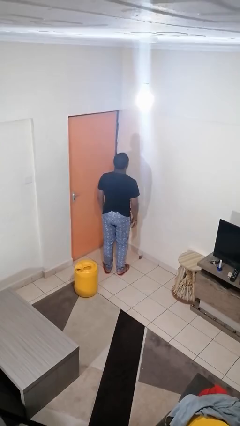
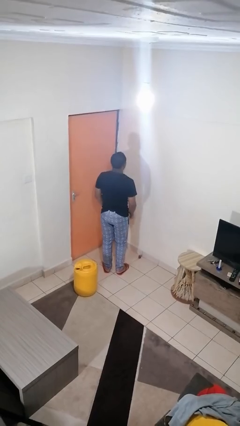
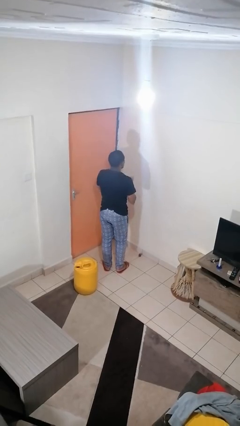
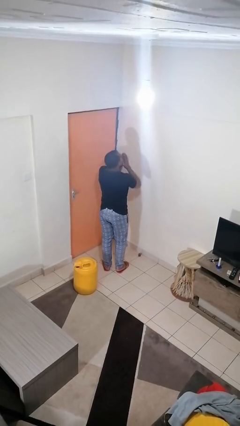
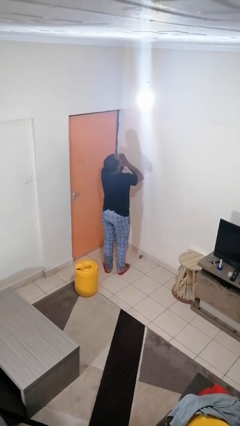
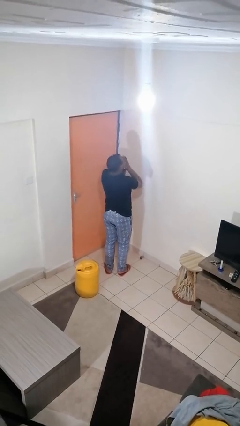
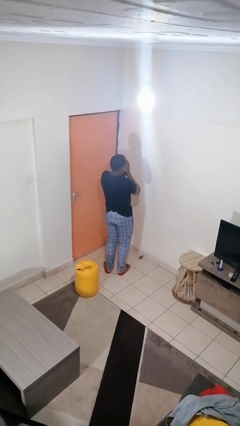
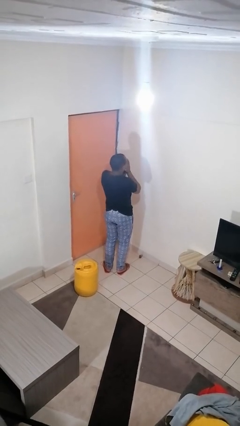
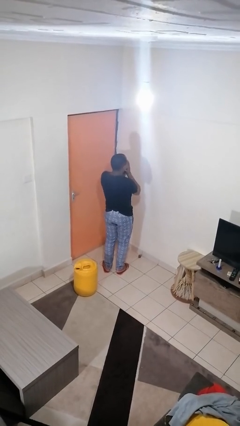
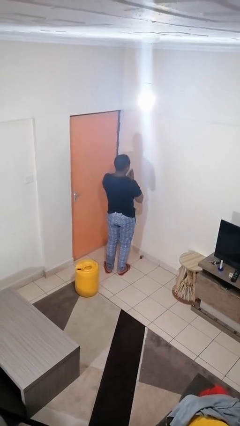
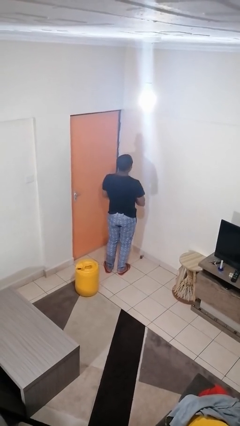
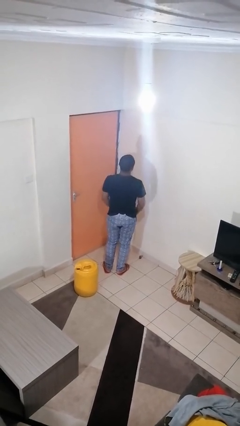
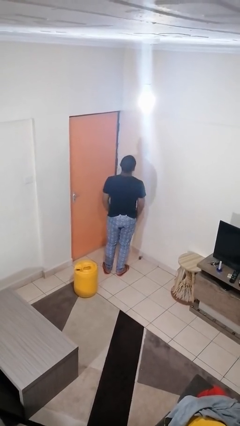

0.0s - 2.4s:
person sneezes into hand

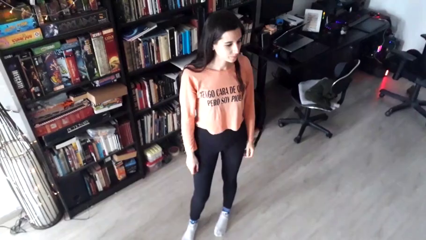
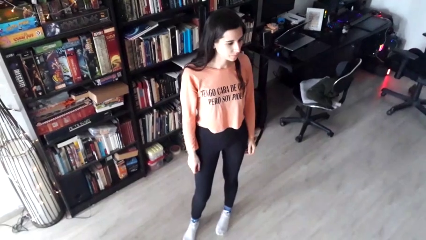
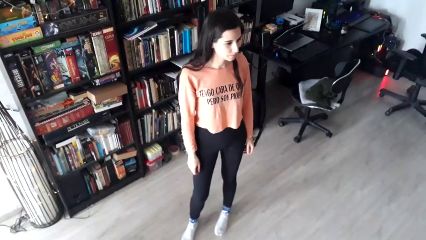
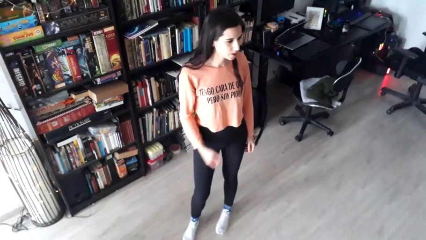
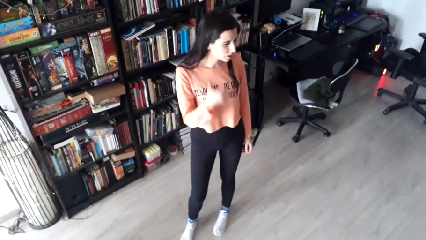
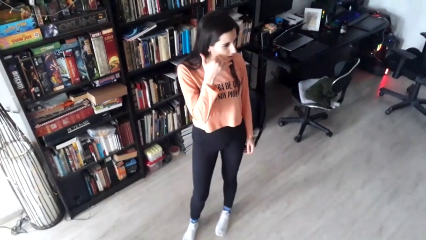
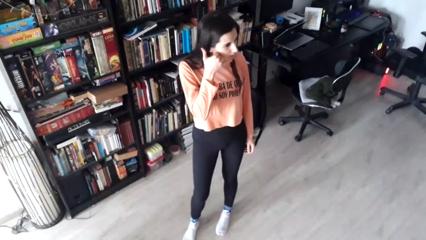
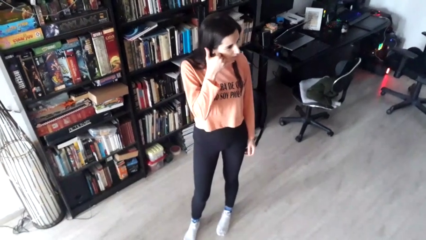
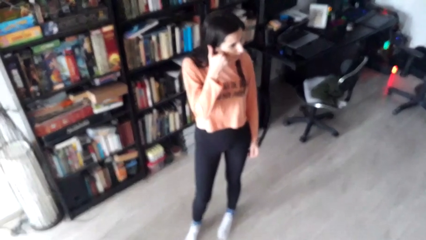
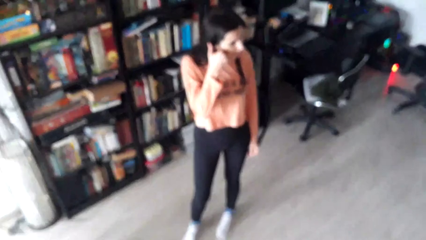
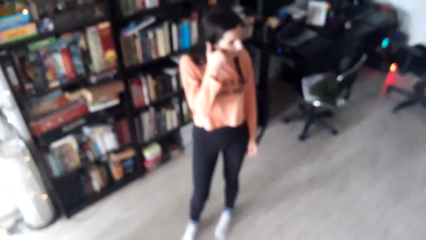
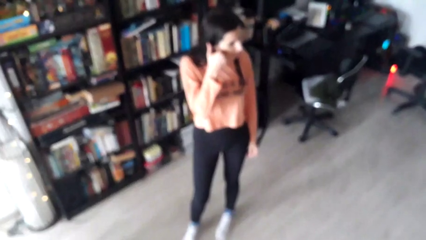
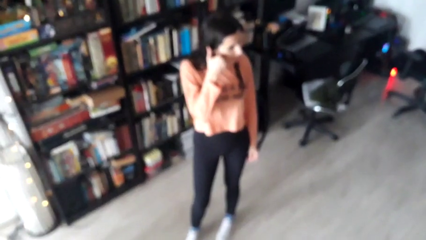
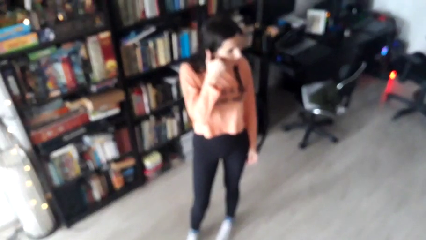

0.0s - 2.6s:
person gestures call me

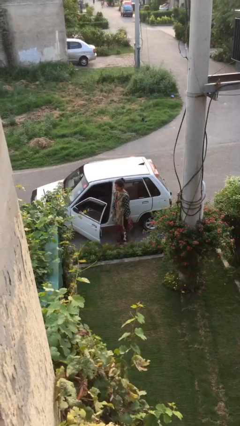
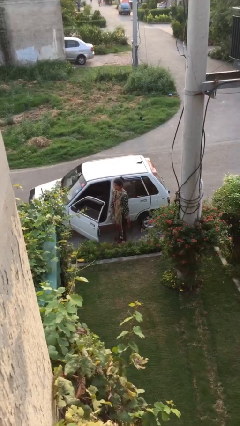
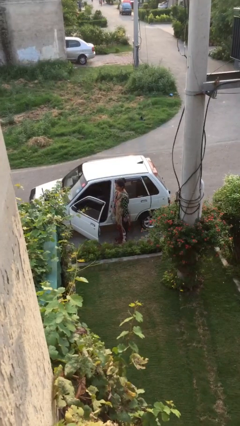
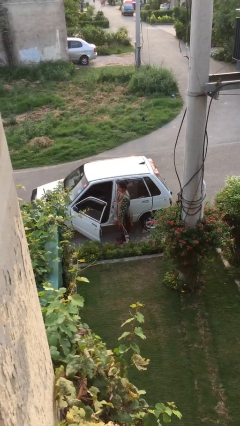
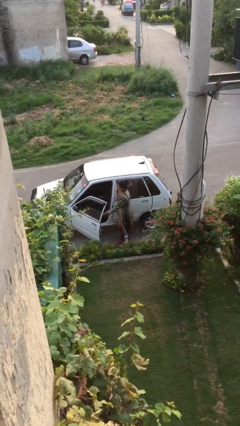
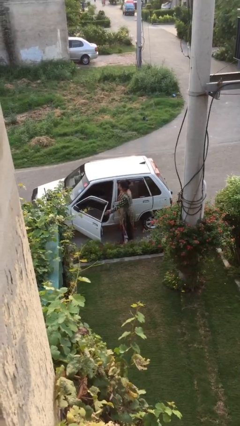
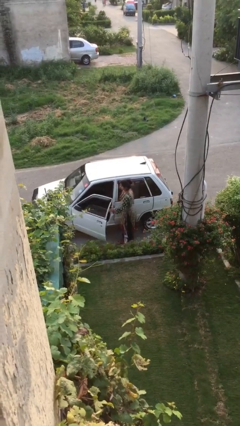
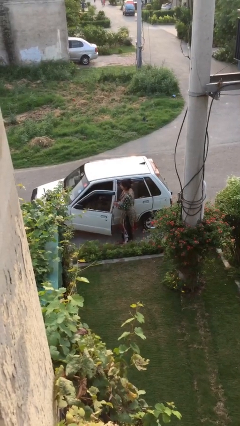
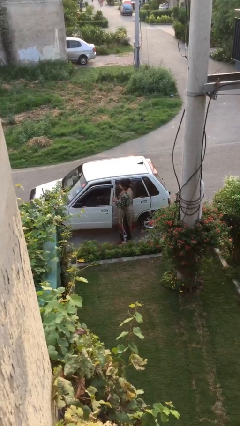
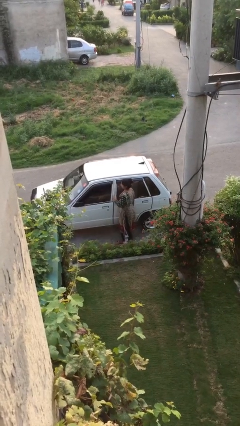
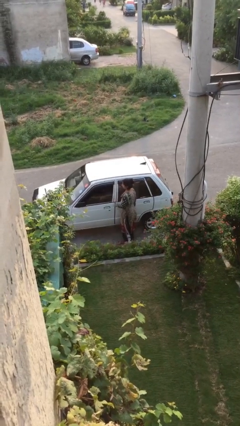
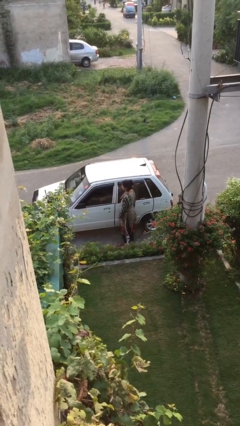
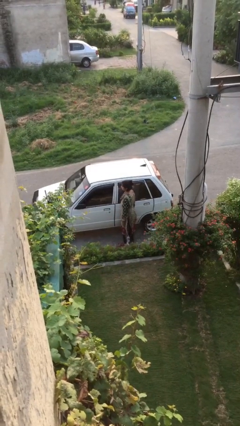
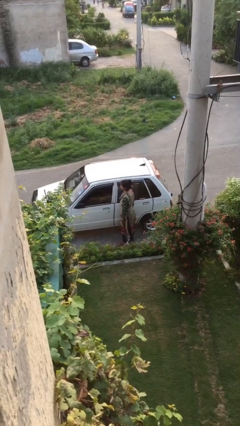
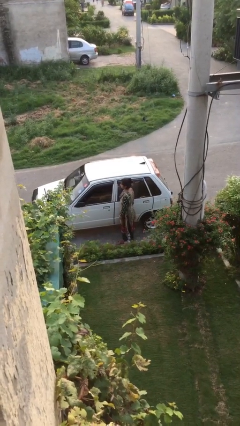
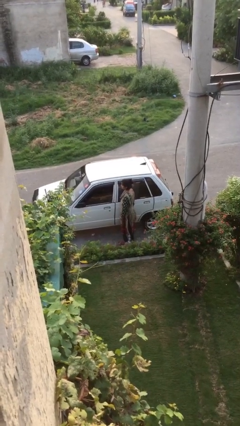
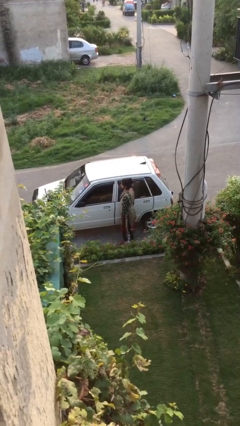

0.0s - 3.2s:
person closes car door

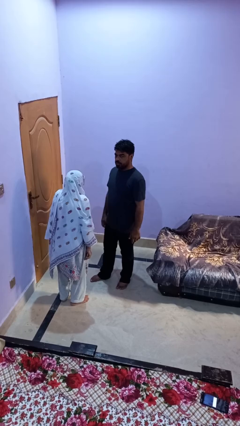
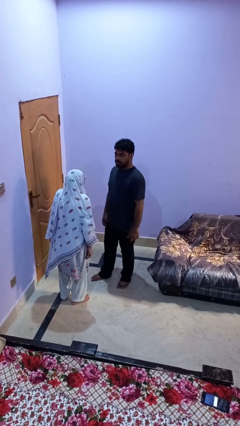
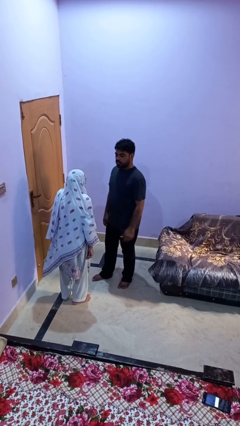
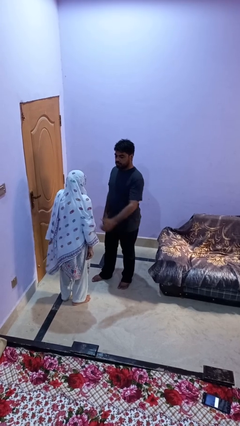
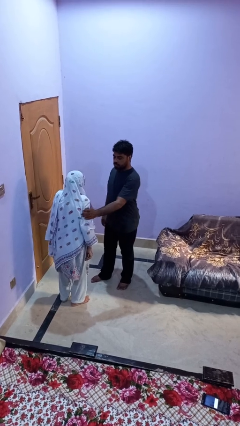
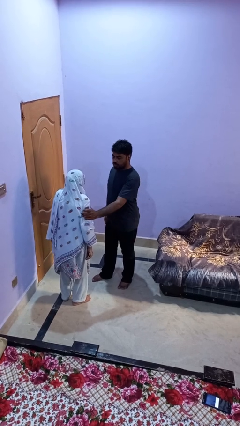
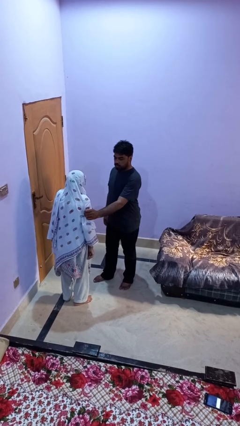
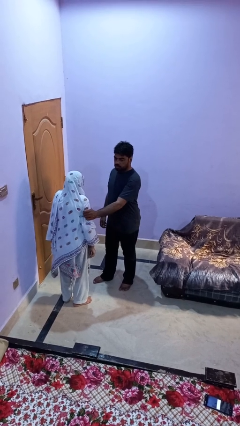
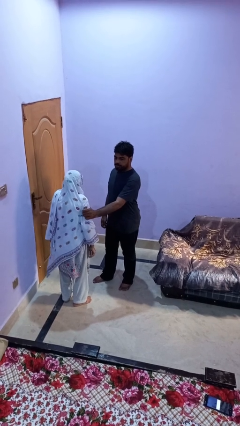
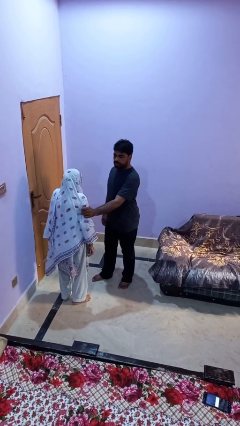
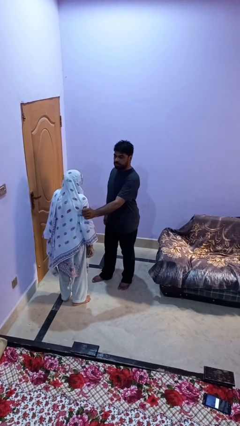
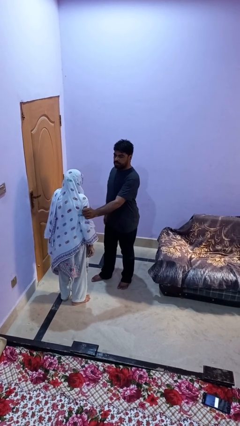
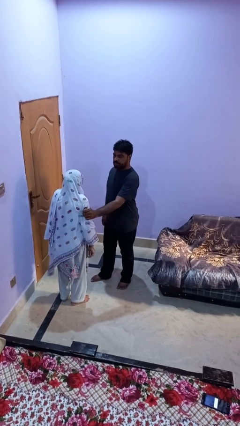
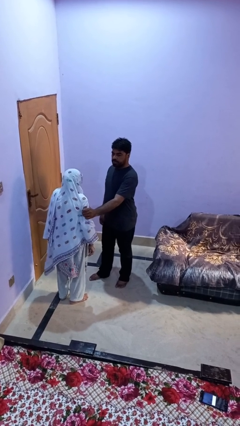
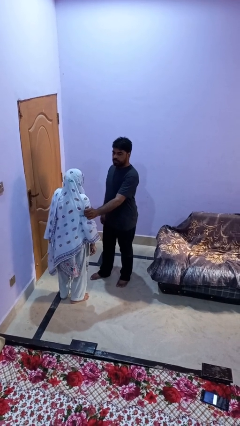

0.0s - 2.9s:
person grabs person by bicep

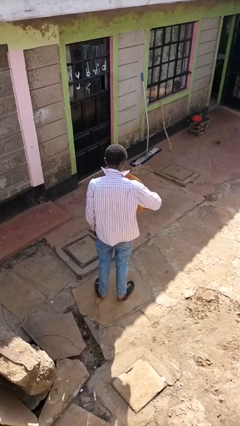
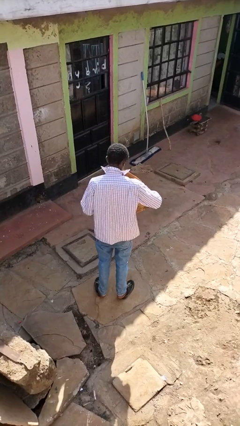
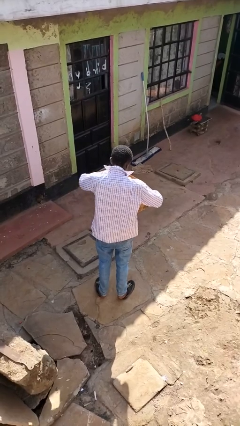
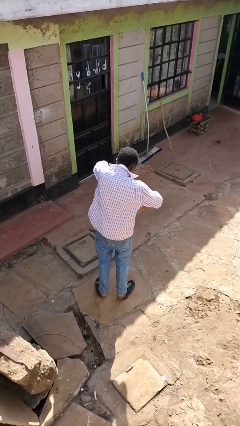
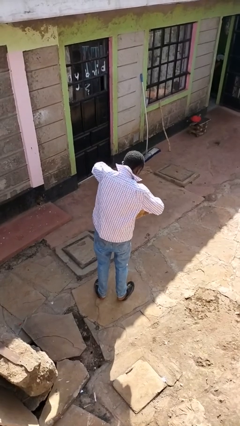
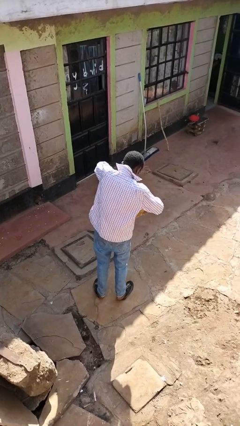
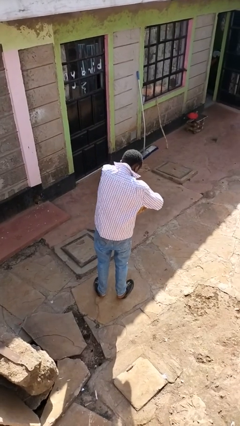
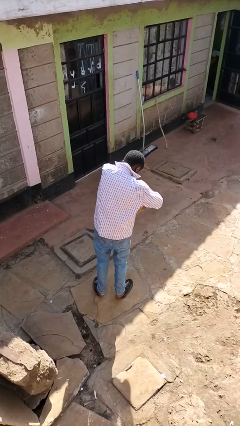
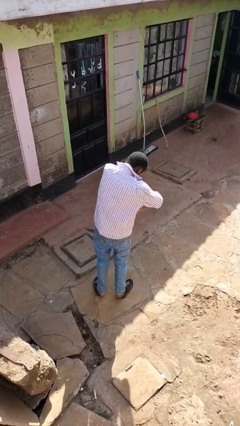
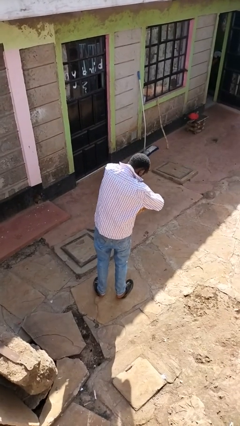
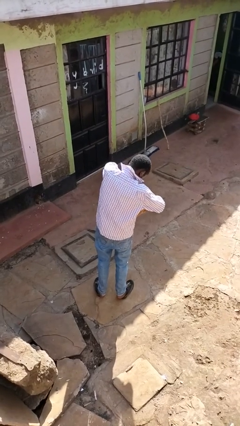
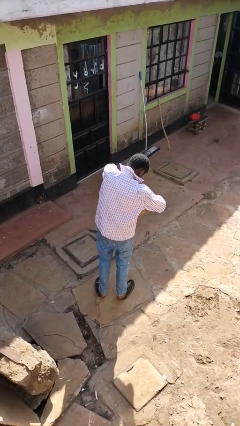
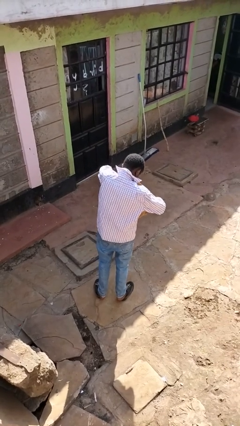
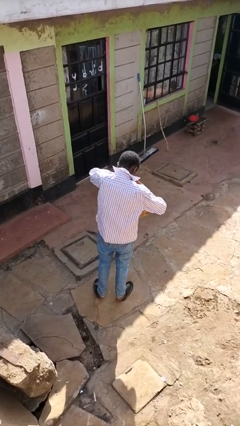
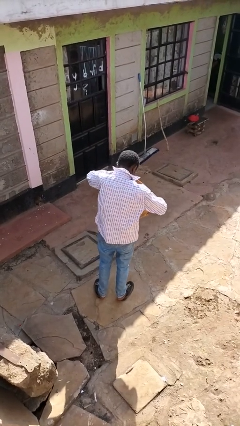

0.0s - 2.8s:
person searches in box

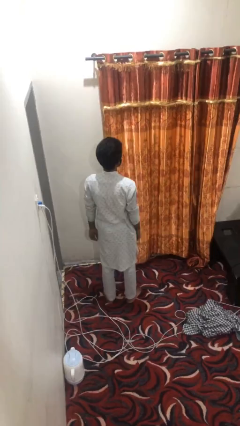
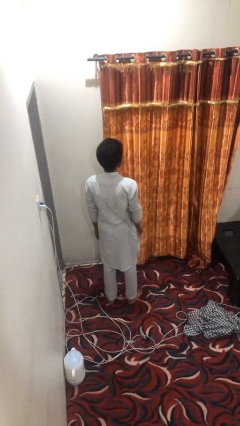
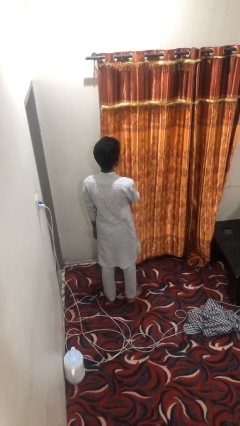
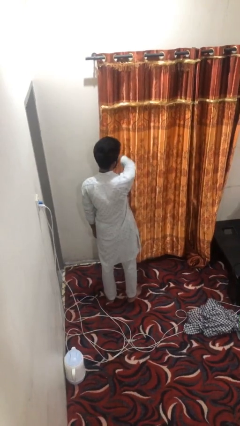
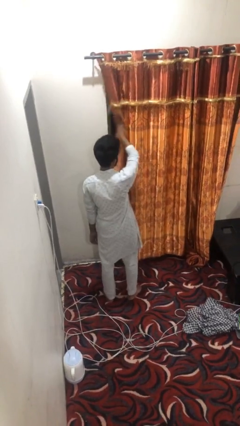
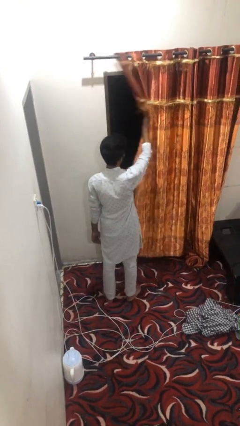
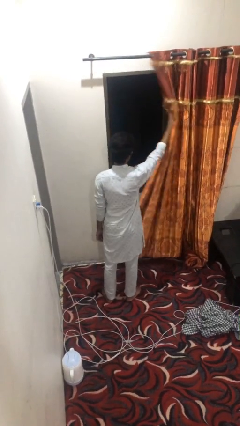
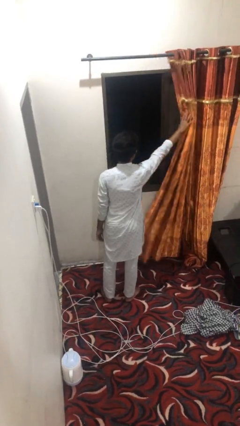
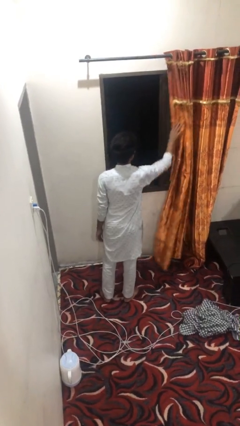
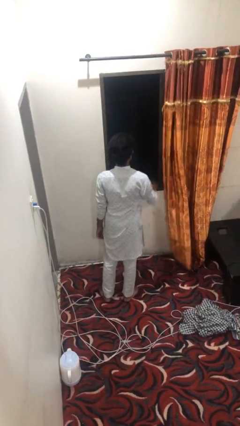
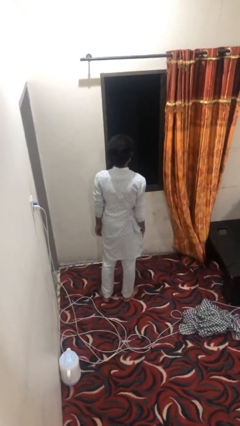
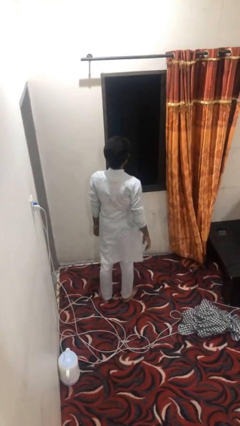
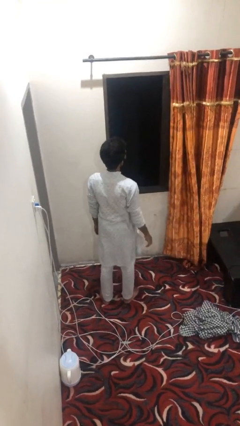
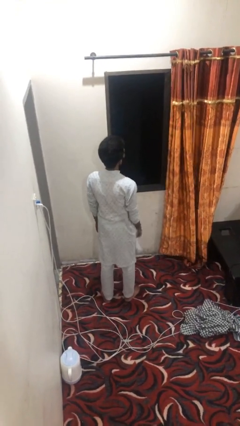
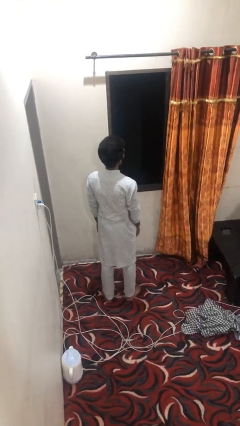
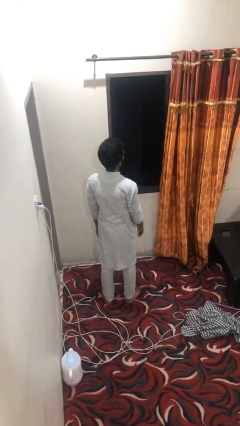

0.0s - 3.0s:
person opens curtains

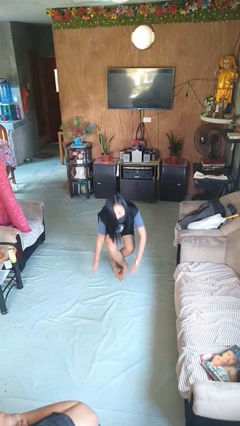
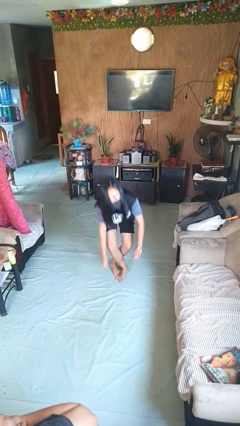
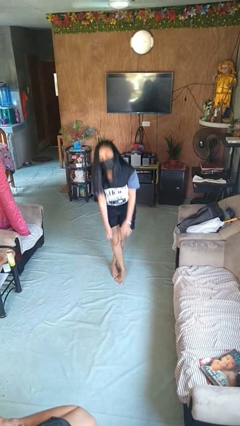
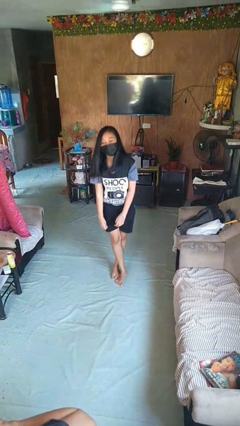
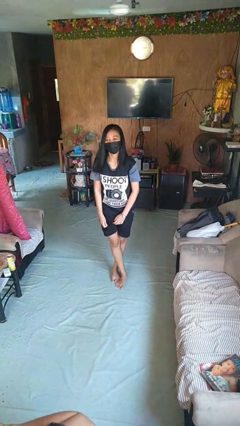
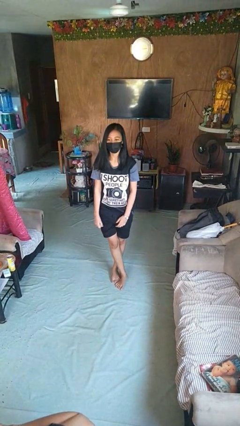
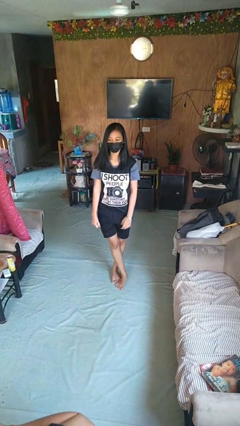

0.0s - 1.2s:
person stands up from floor
